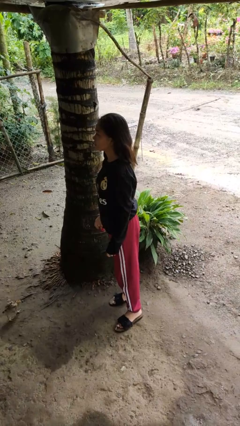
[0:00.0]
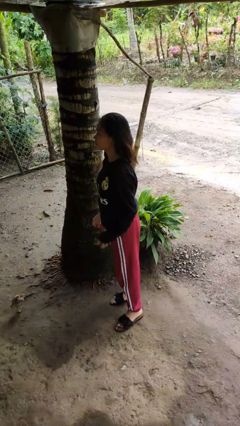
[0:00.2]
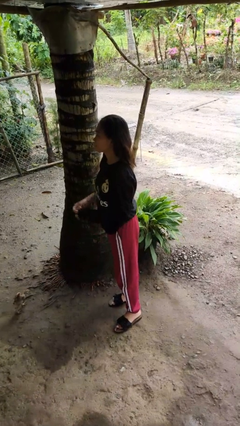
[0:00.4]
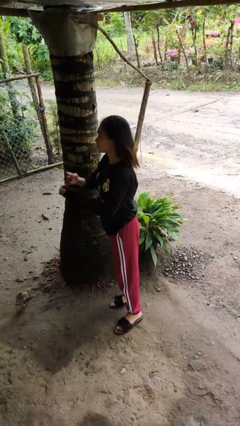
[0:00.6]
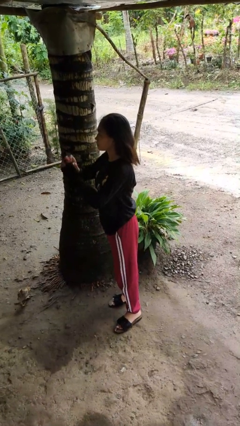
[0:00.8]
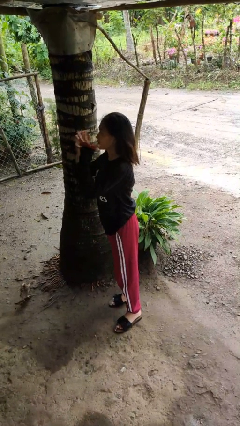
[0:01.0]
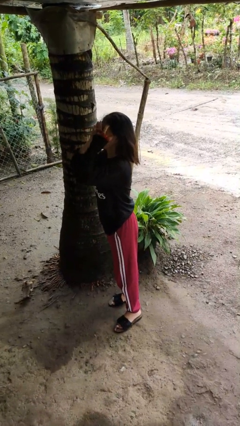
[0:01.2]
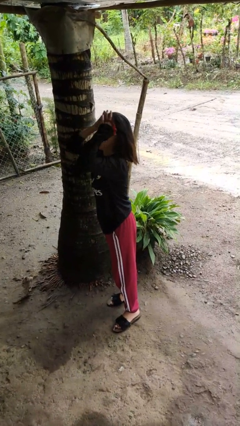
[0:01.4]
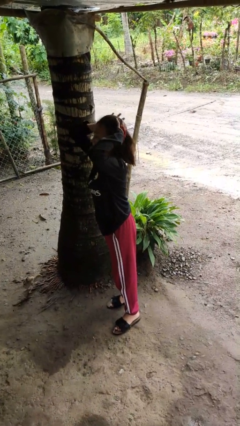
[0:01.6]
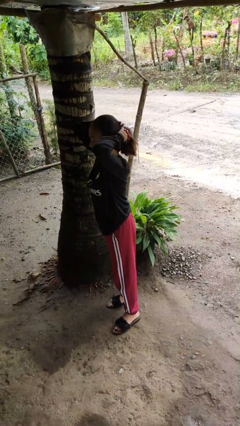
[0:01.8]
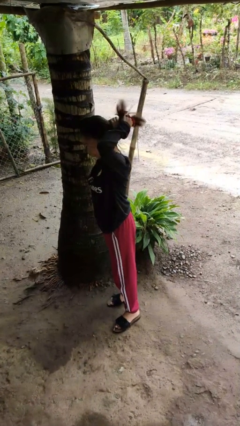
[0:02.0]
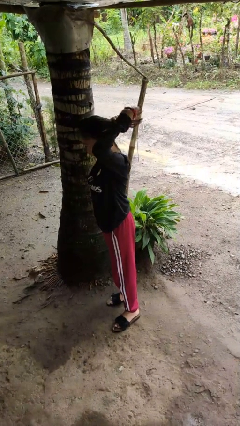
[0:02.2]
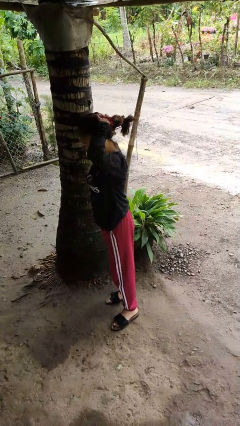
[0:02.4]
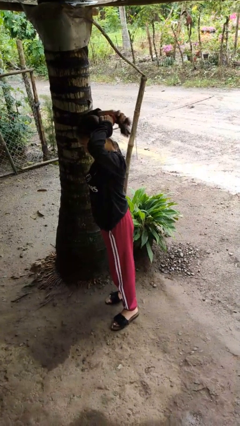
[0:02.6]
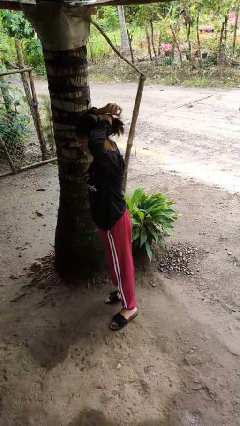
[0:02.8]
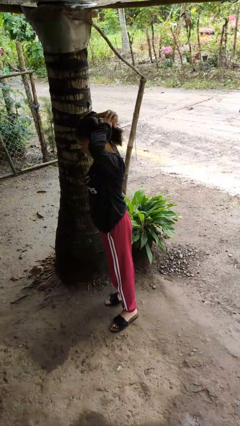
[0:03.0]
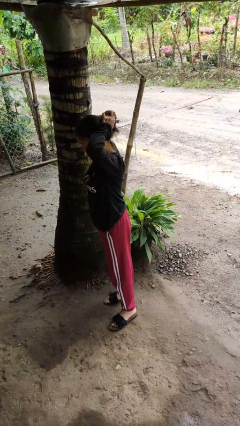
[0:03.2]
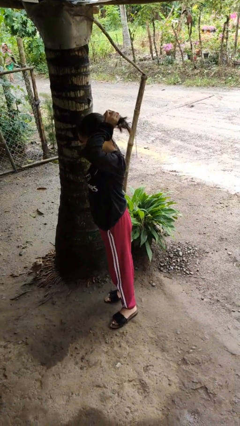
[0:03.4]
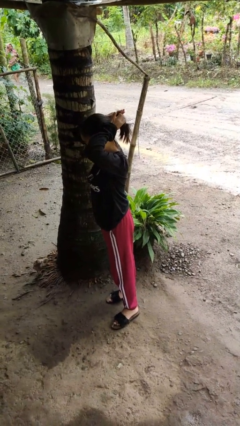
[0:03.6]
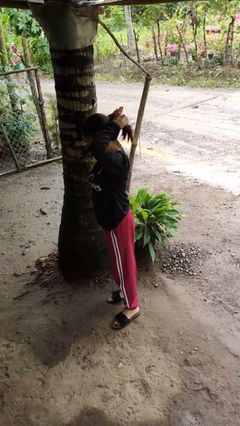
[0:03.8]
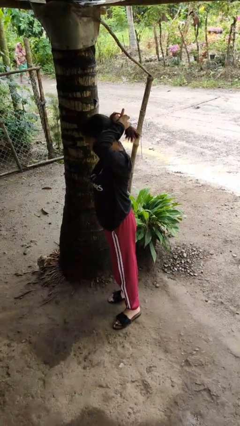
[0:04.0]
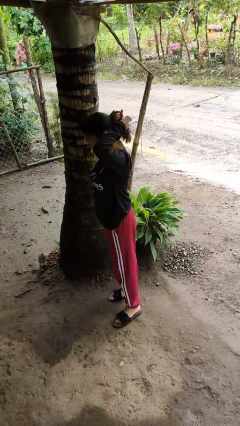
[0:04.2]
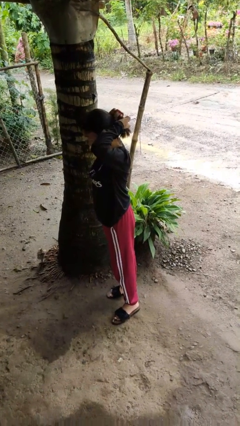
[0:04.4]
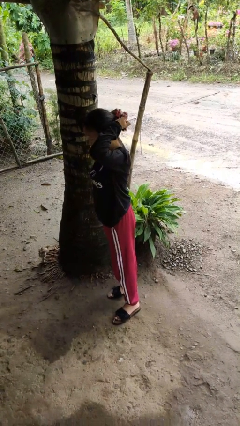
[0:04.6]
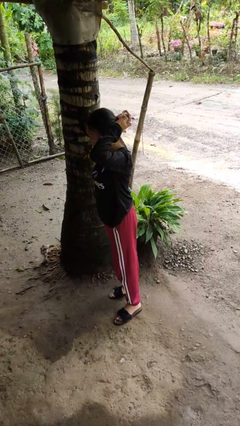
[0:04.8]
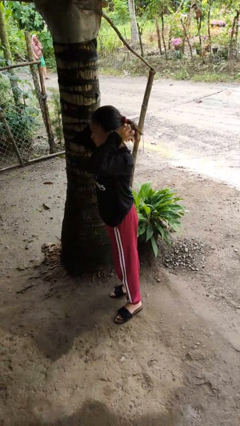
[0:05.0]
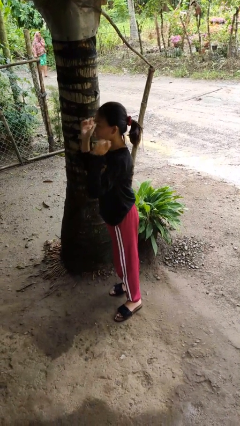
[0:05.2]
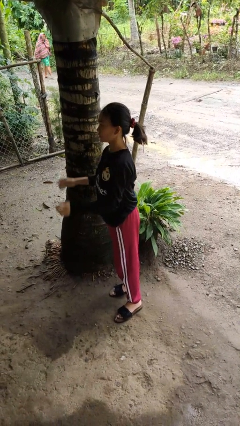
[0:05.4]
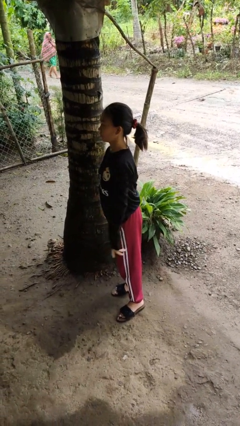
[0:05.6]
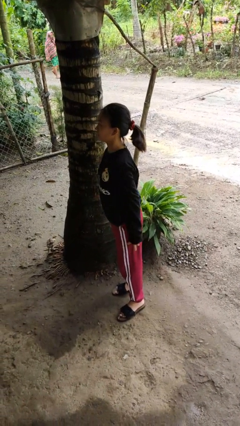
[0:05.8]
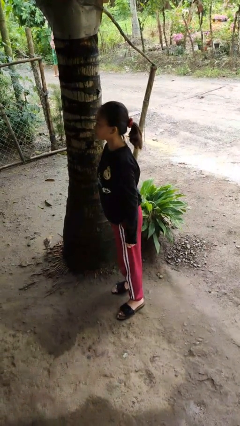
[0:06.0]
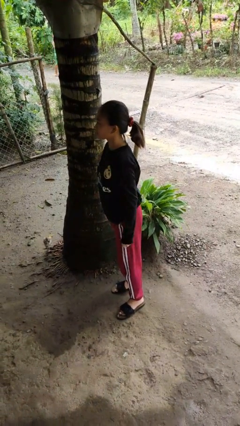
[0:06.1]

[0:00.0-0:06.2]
person puts hair in ponytail

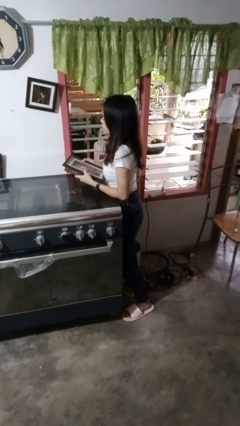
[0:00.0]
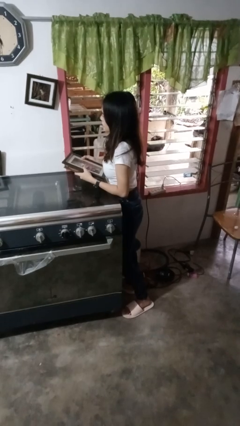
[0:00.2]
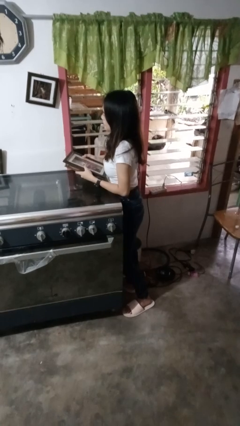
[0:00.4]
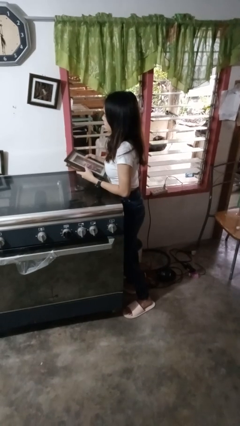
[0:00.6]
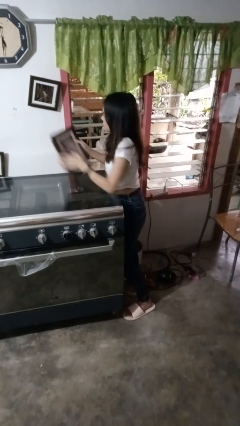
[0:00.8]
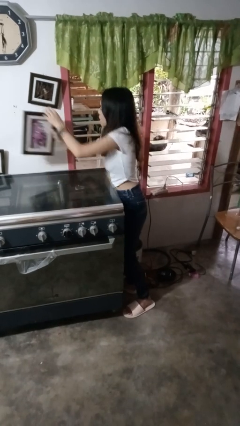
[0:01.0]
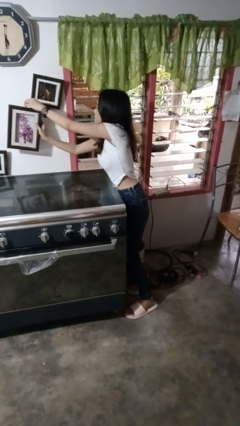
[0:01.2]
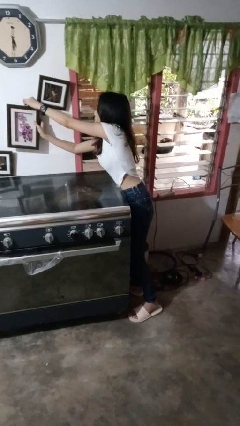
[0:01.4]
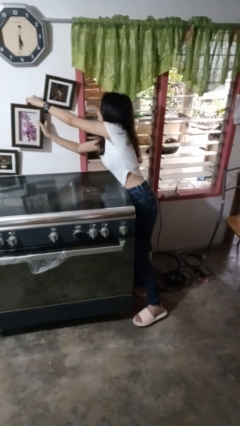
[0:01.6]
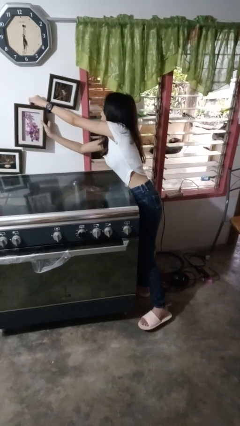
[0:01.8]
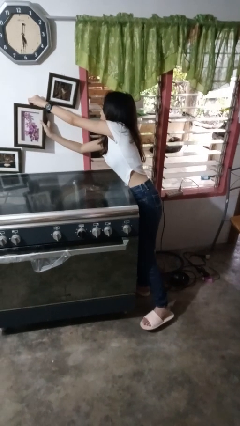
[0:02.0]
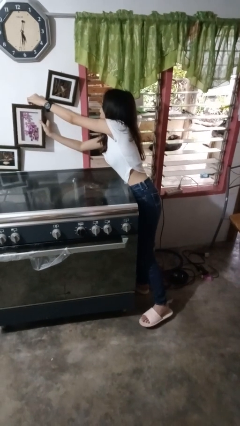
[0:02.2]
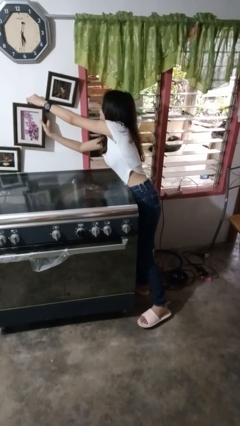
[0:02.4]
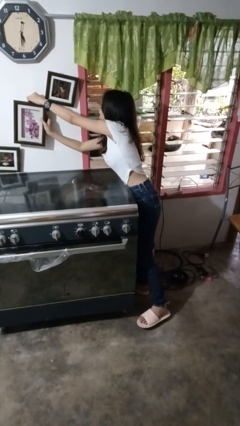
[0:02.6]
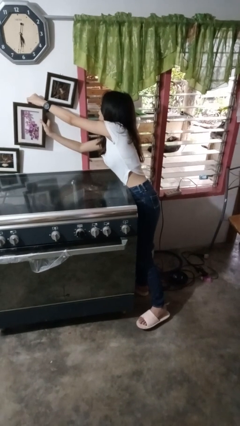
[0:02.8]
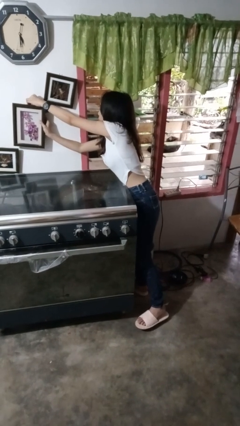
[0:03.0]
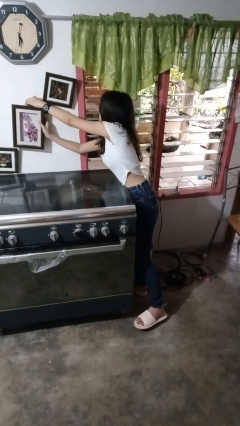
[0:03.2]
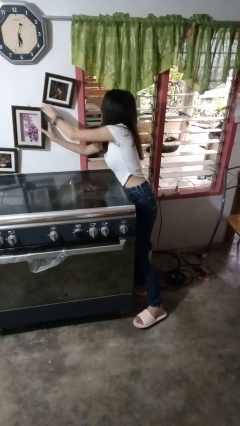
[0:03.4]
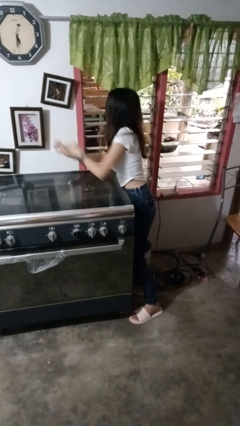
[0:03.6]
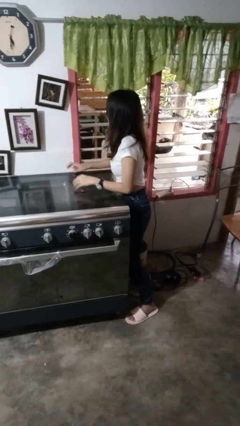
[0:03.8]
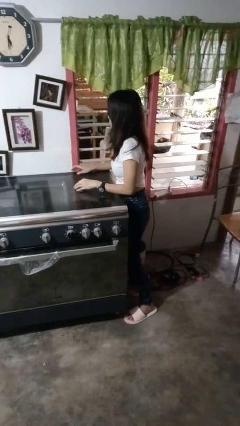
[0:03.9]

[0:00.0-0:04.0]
person puts up picture frame

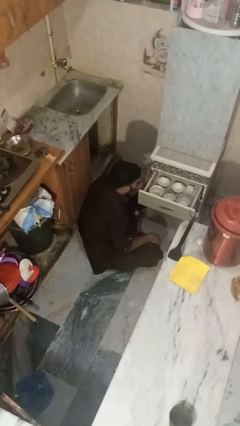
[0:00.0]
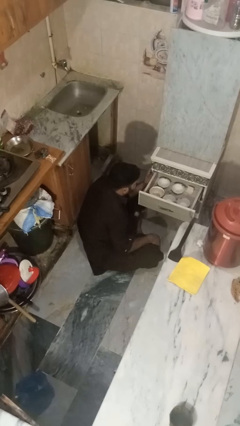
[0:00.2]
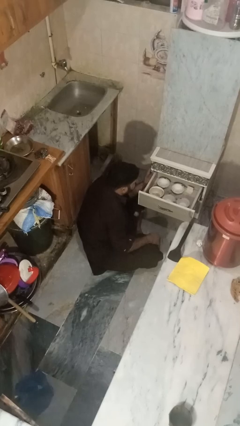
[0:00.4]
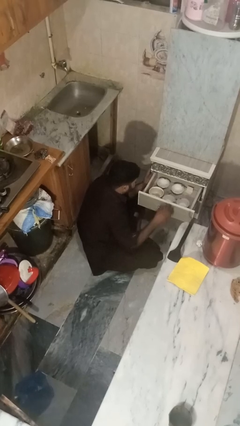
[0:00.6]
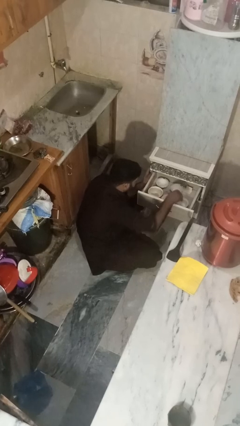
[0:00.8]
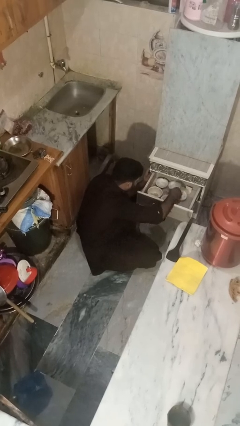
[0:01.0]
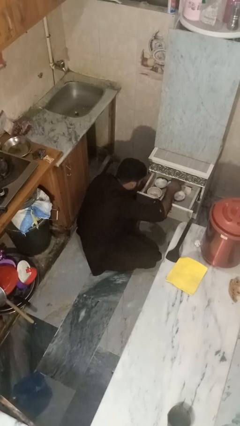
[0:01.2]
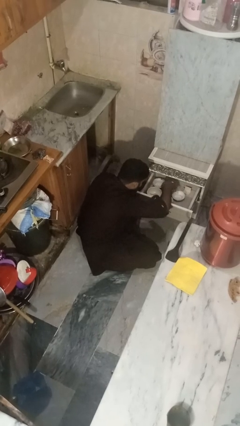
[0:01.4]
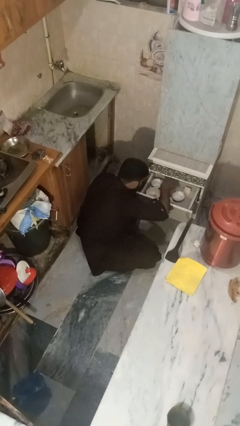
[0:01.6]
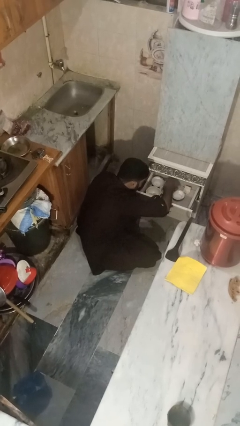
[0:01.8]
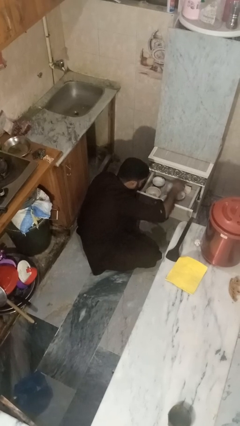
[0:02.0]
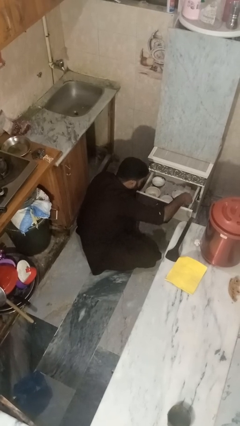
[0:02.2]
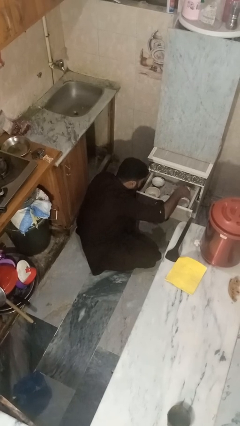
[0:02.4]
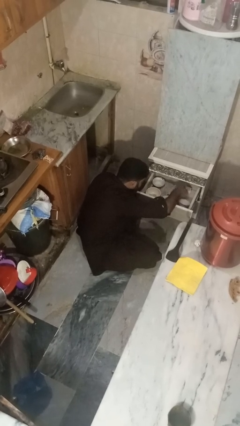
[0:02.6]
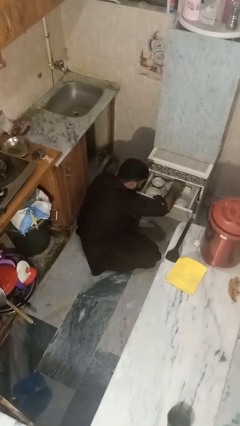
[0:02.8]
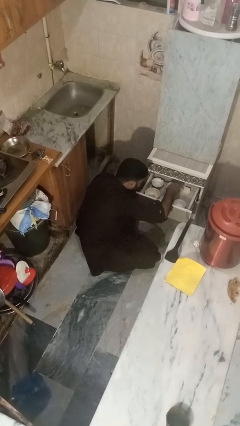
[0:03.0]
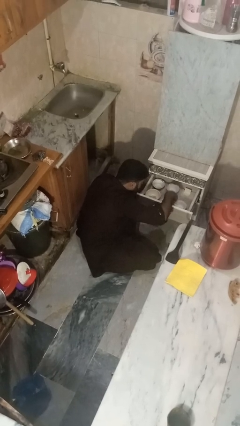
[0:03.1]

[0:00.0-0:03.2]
person searches in kitchen drawer

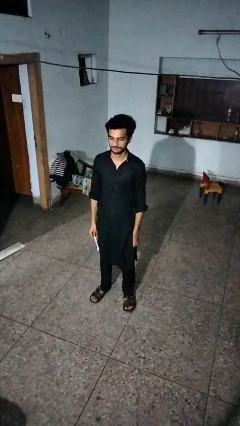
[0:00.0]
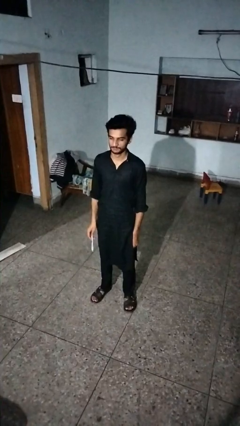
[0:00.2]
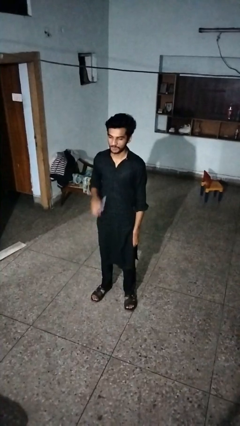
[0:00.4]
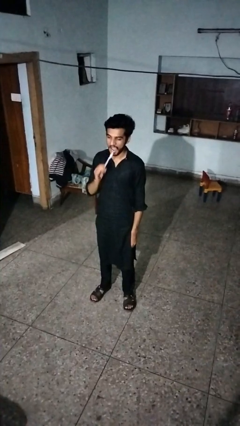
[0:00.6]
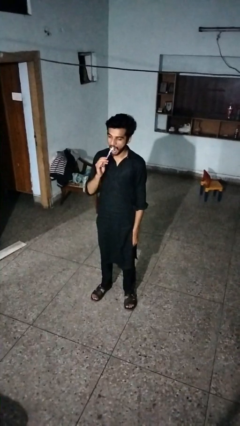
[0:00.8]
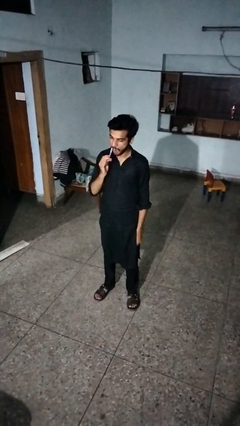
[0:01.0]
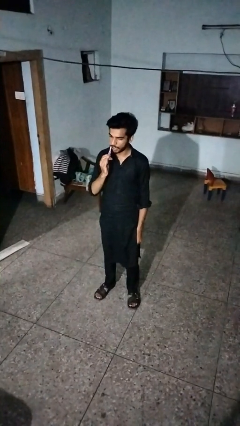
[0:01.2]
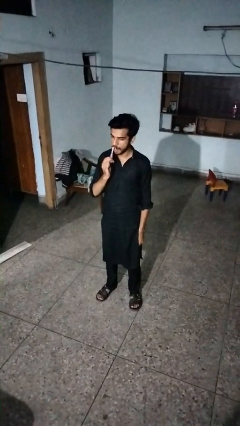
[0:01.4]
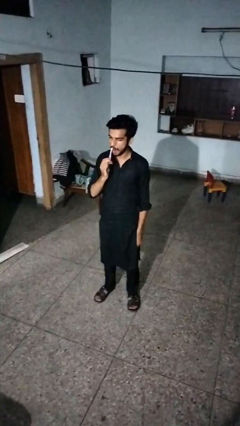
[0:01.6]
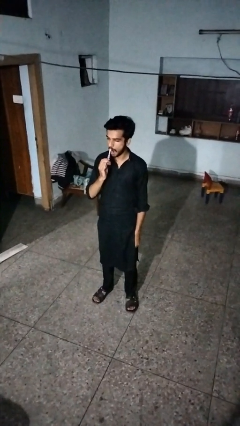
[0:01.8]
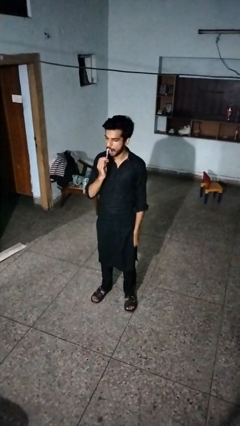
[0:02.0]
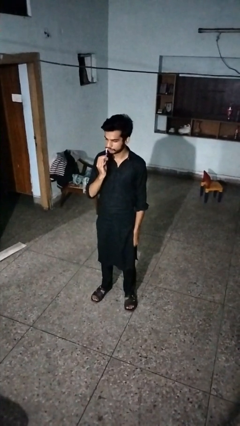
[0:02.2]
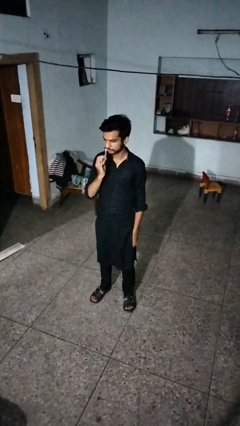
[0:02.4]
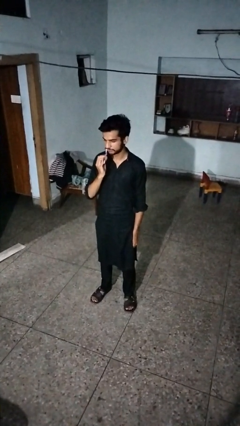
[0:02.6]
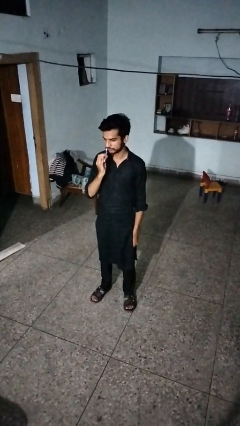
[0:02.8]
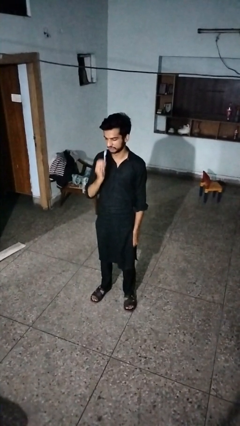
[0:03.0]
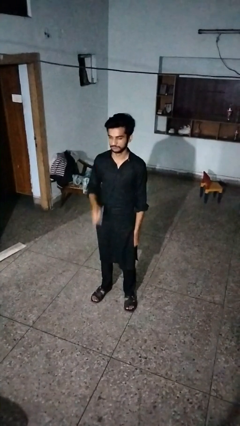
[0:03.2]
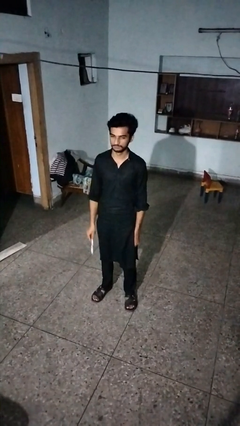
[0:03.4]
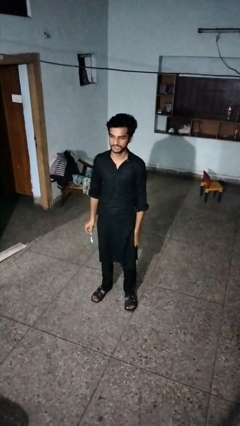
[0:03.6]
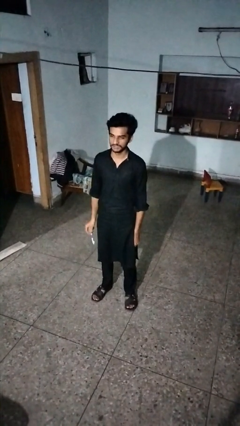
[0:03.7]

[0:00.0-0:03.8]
person brushes teeth

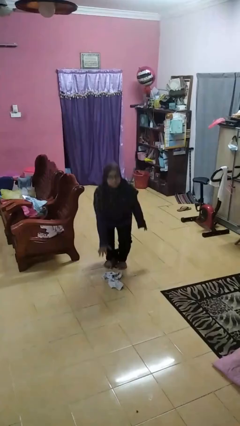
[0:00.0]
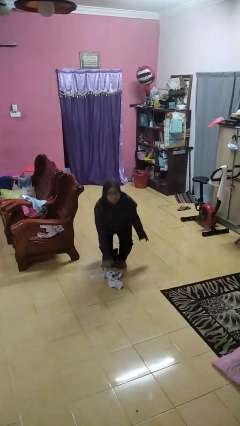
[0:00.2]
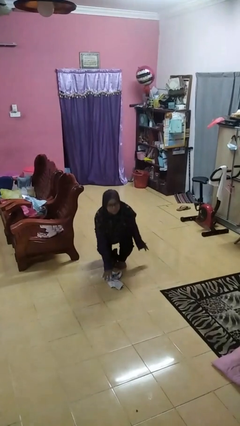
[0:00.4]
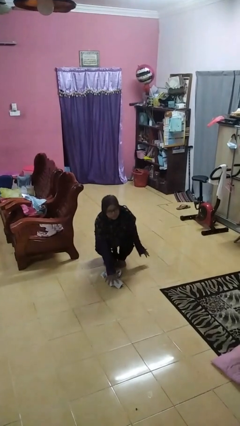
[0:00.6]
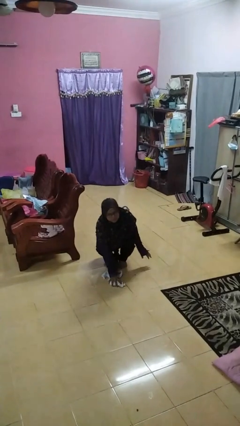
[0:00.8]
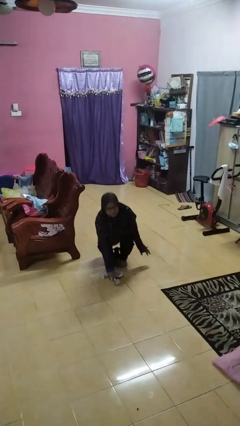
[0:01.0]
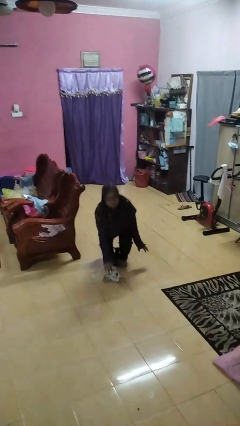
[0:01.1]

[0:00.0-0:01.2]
person picks up object from floor
